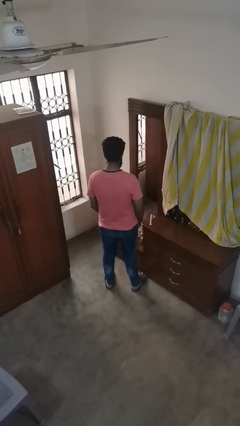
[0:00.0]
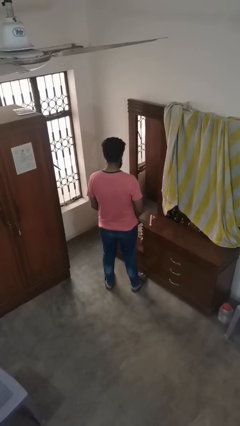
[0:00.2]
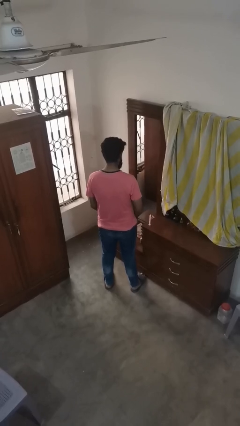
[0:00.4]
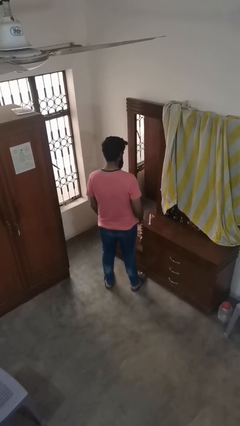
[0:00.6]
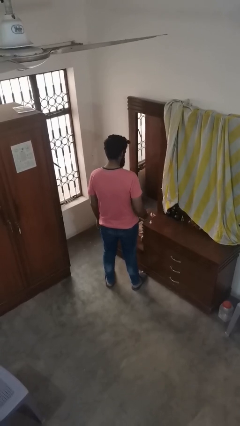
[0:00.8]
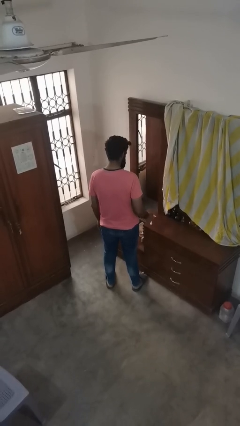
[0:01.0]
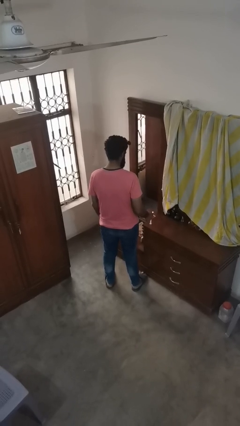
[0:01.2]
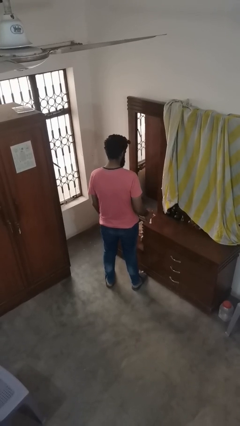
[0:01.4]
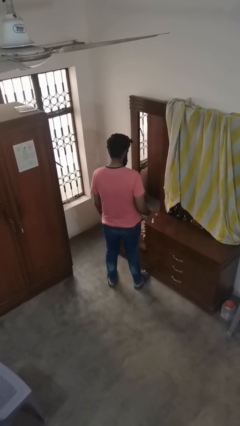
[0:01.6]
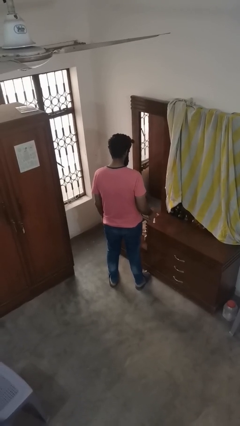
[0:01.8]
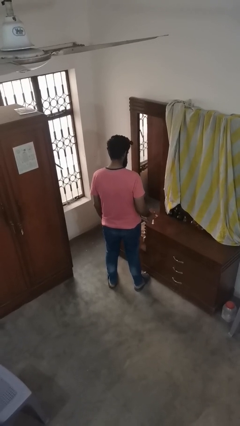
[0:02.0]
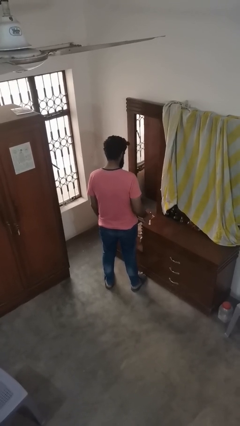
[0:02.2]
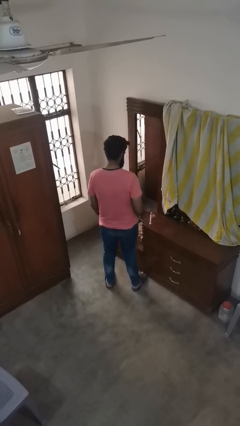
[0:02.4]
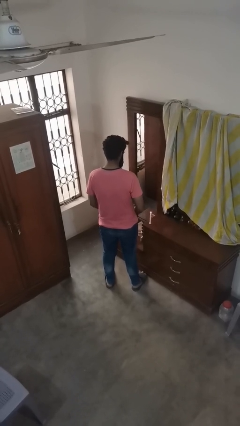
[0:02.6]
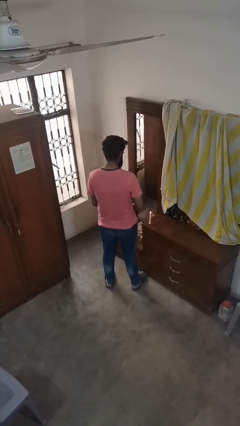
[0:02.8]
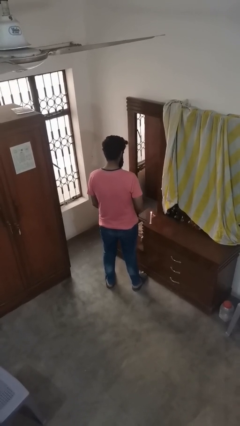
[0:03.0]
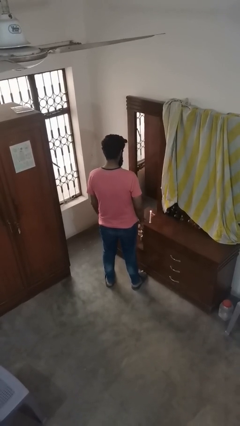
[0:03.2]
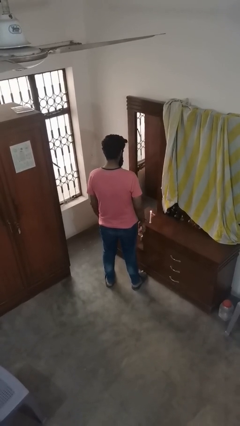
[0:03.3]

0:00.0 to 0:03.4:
person lights candle

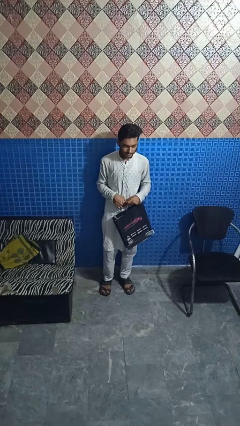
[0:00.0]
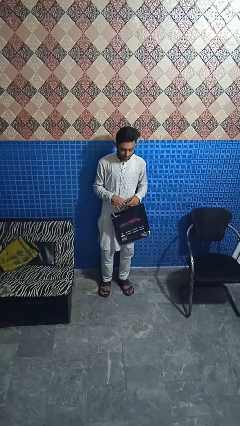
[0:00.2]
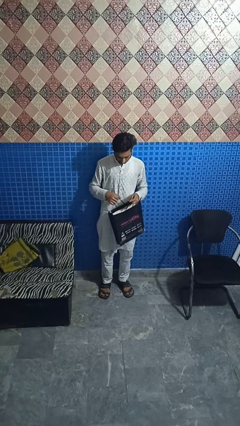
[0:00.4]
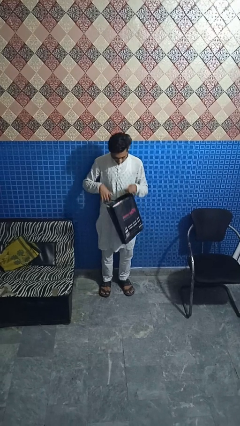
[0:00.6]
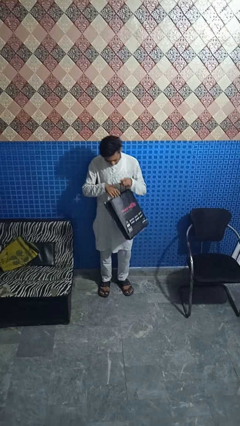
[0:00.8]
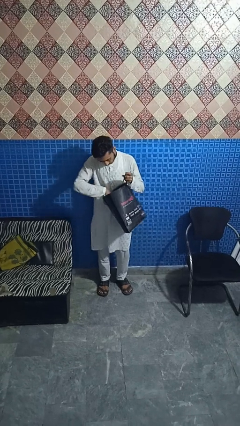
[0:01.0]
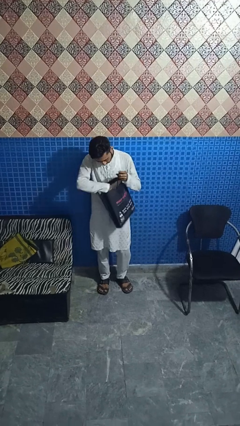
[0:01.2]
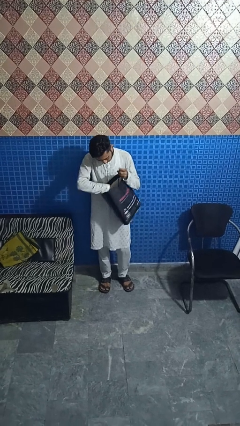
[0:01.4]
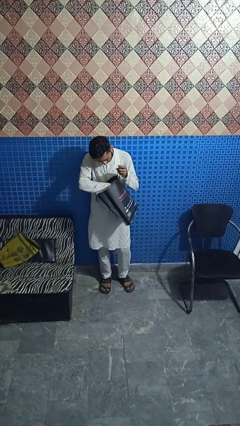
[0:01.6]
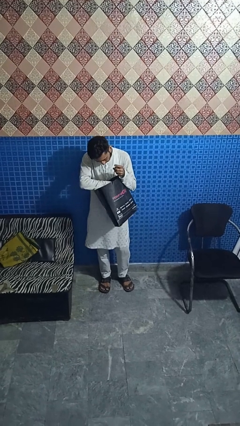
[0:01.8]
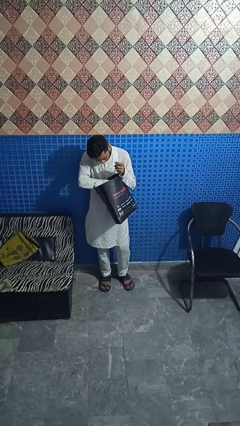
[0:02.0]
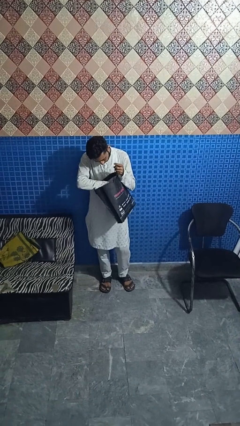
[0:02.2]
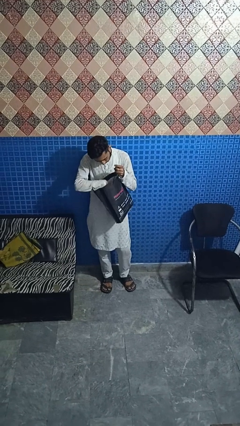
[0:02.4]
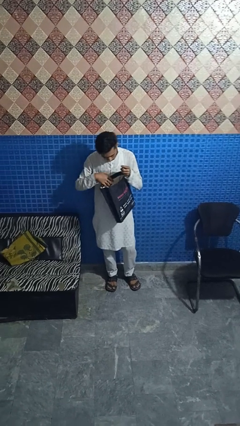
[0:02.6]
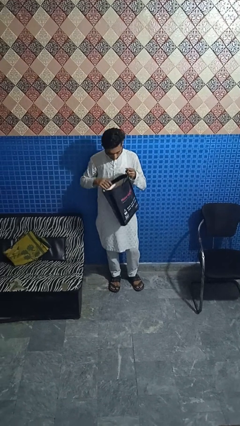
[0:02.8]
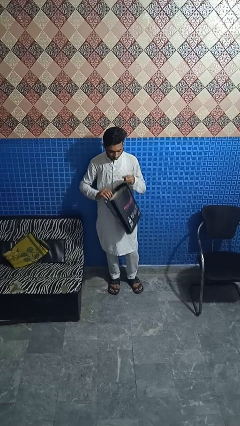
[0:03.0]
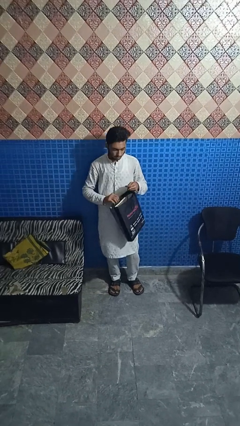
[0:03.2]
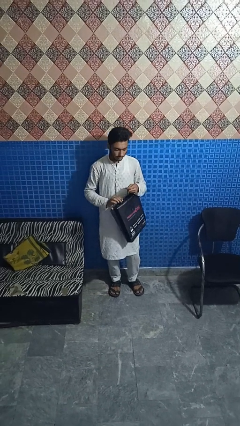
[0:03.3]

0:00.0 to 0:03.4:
person searches in bag

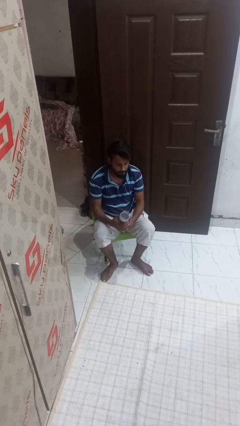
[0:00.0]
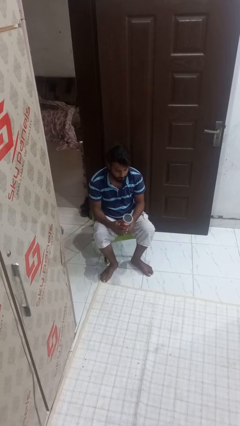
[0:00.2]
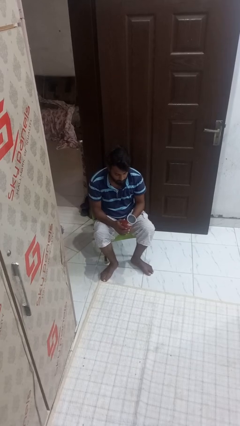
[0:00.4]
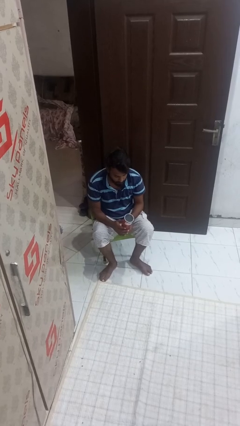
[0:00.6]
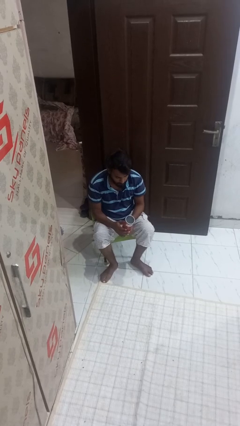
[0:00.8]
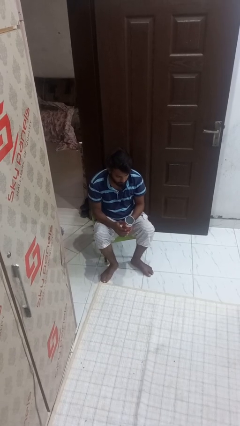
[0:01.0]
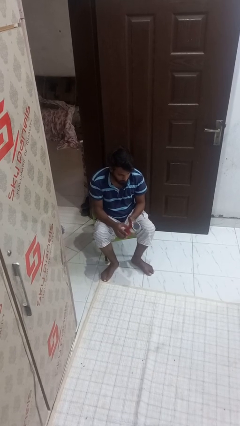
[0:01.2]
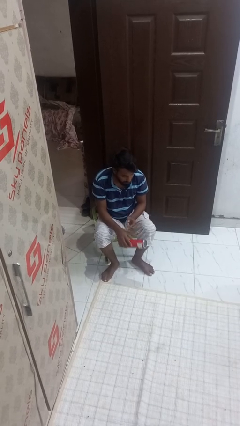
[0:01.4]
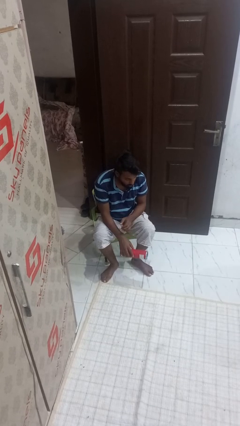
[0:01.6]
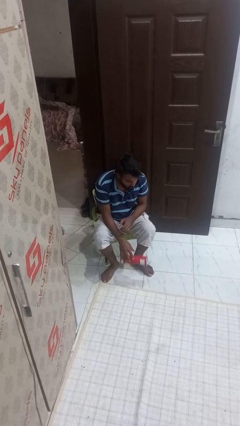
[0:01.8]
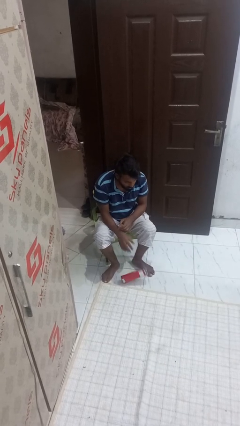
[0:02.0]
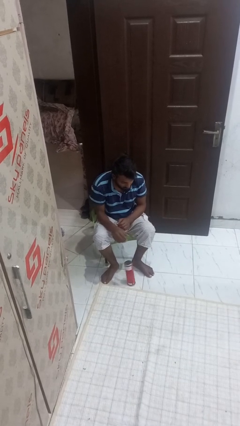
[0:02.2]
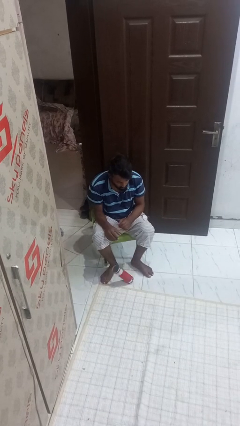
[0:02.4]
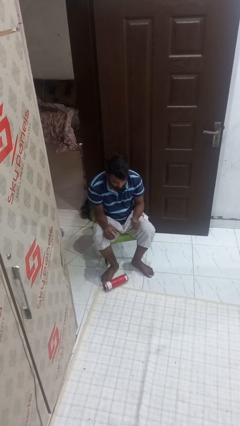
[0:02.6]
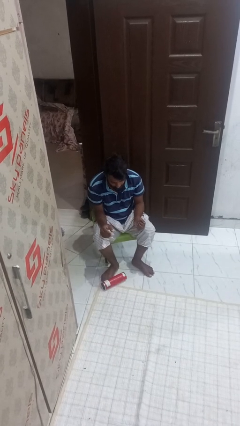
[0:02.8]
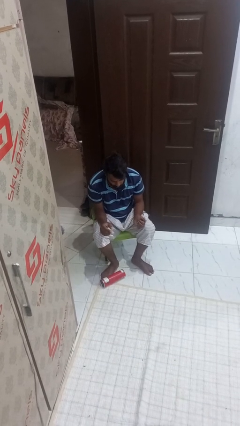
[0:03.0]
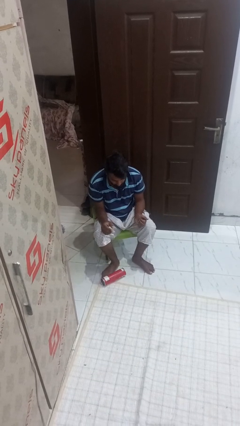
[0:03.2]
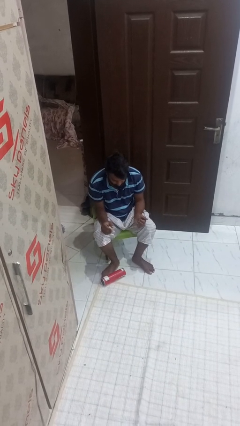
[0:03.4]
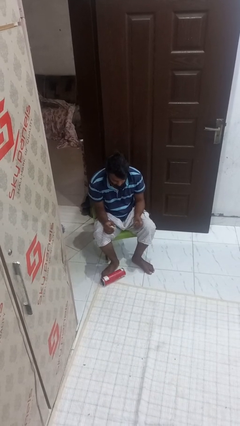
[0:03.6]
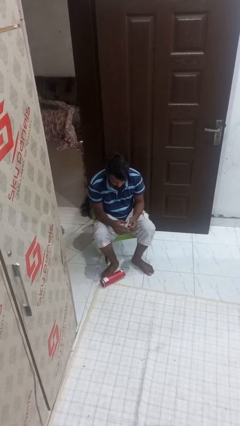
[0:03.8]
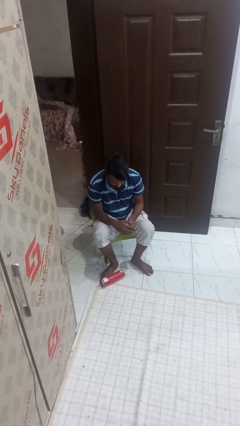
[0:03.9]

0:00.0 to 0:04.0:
person drops object

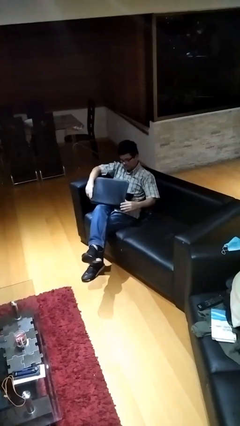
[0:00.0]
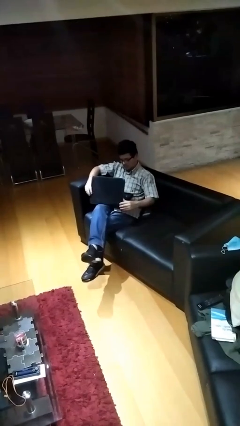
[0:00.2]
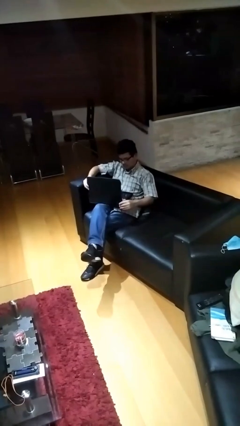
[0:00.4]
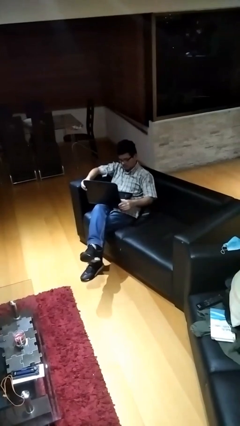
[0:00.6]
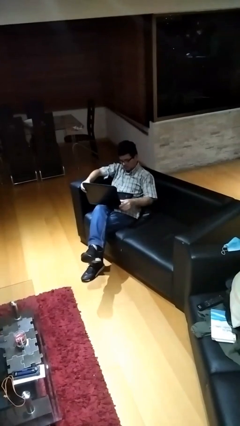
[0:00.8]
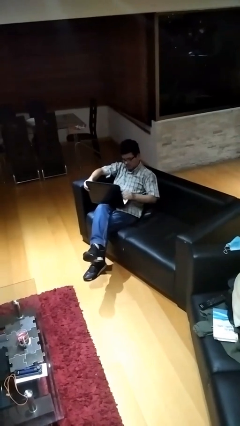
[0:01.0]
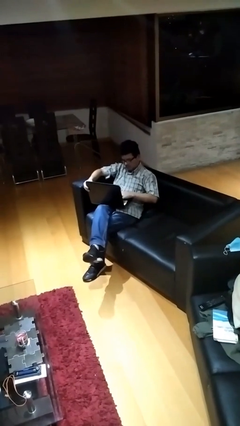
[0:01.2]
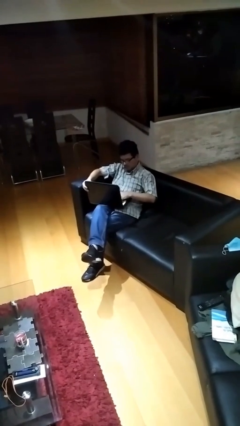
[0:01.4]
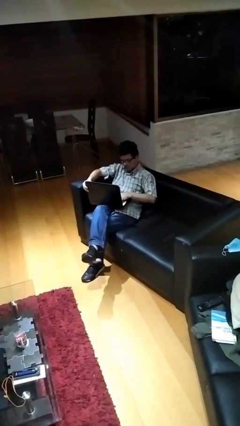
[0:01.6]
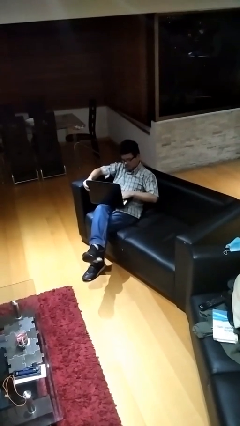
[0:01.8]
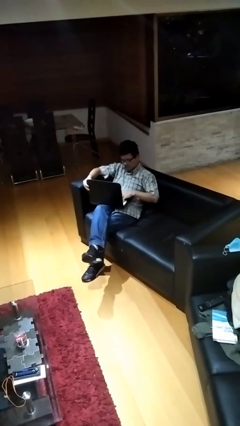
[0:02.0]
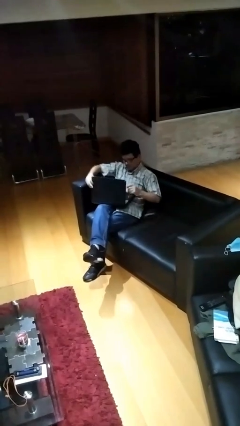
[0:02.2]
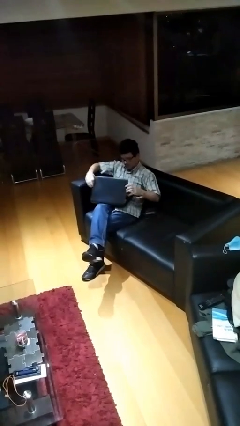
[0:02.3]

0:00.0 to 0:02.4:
person interacts with laptop

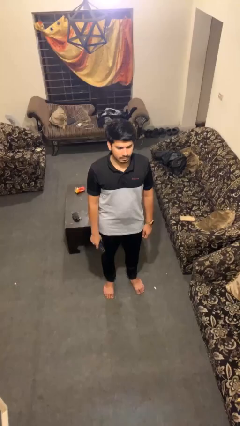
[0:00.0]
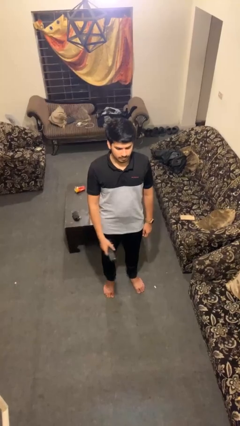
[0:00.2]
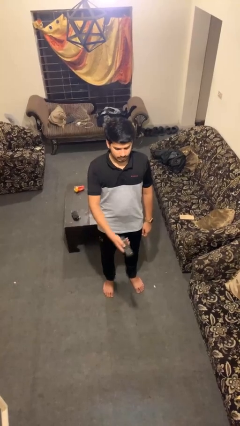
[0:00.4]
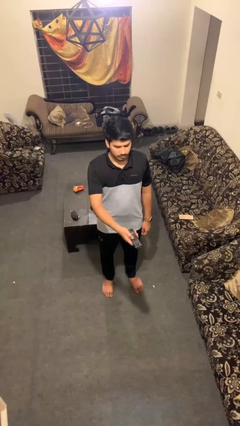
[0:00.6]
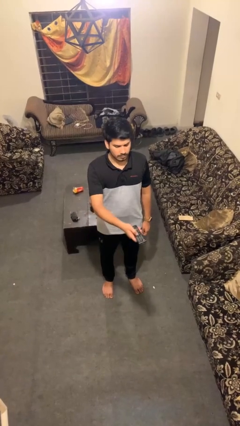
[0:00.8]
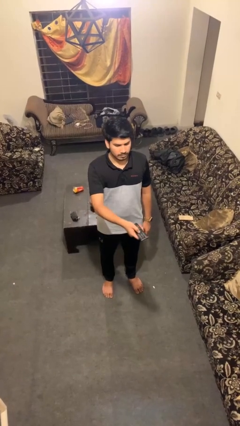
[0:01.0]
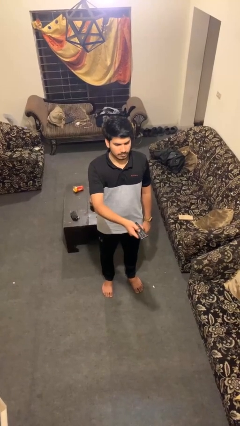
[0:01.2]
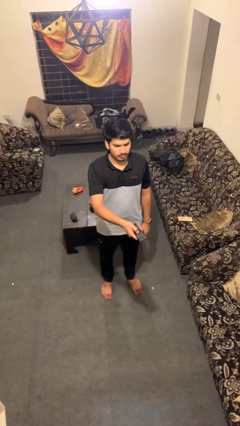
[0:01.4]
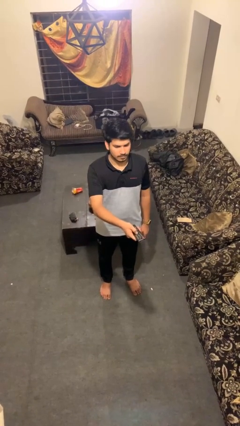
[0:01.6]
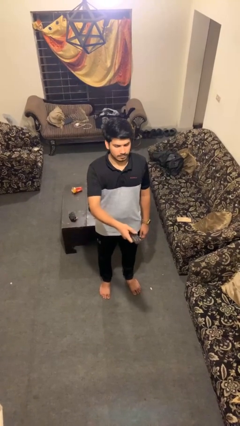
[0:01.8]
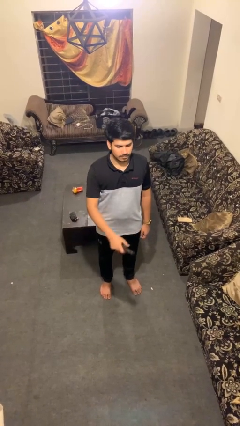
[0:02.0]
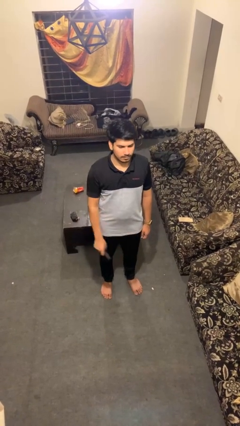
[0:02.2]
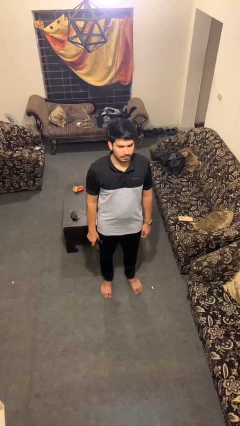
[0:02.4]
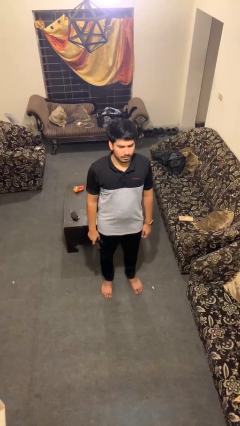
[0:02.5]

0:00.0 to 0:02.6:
person uses television remote

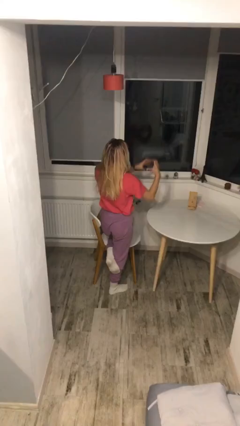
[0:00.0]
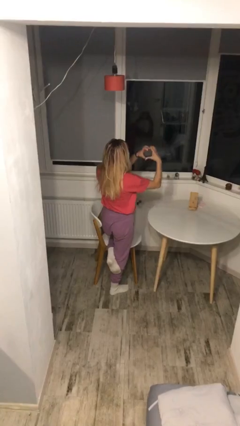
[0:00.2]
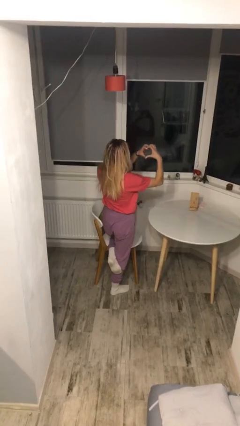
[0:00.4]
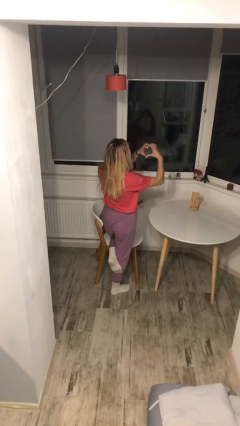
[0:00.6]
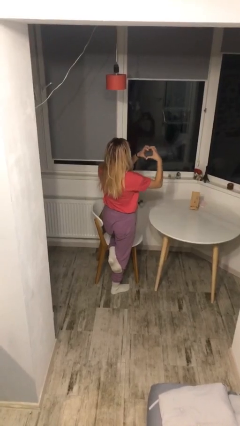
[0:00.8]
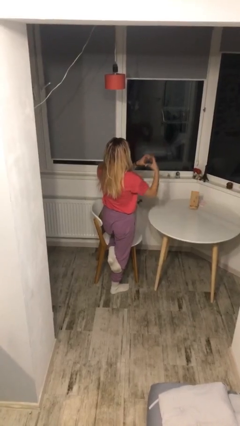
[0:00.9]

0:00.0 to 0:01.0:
person gestures heart

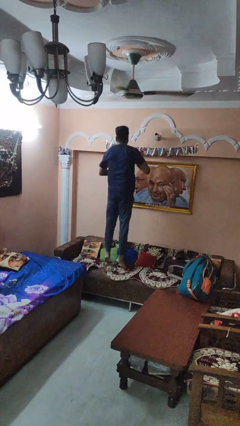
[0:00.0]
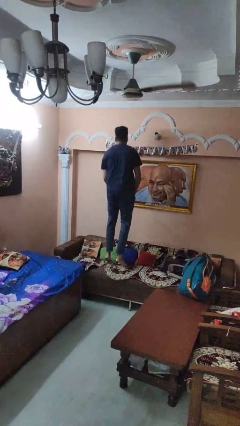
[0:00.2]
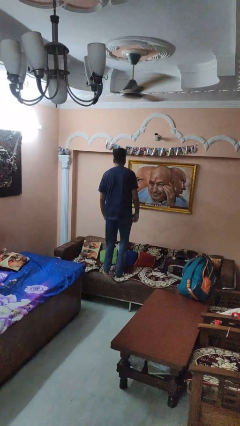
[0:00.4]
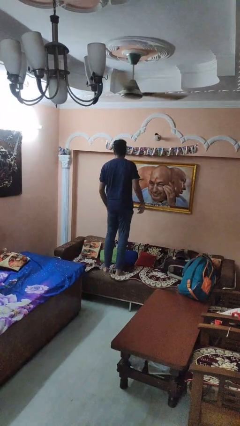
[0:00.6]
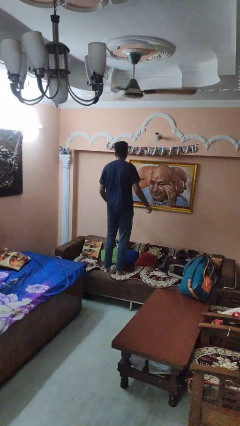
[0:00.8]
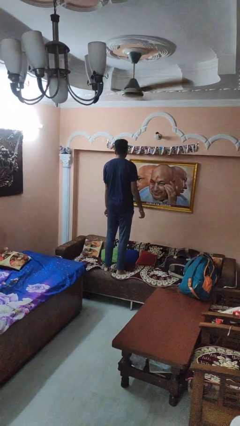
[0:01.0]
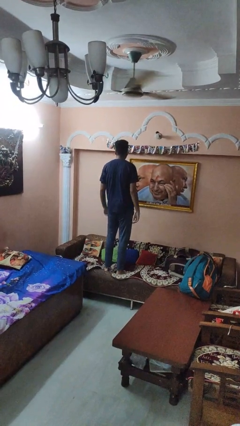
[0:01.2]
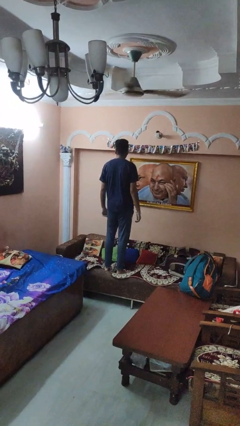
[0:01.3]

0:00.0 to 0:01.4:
person jumps on couch
